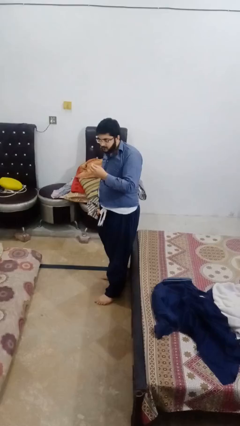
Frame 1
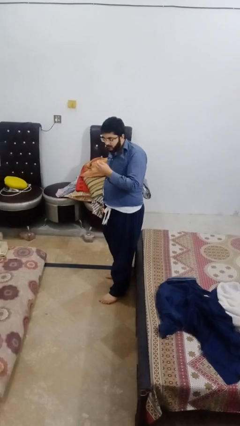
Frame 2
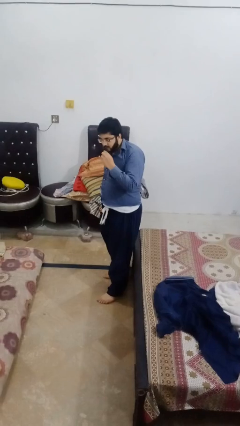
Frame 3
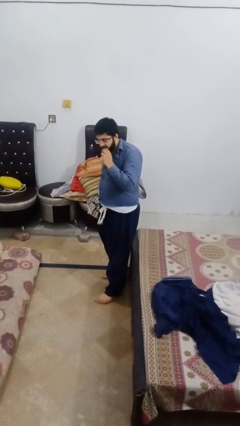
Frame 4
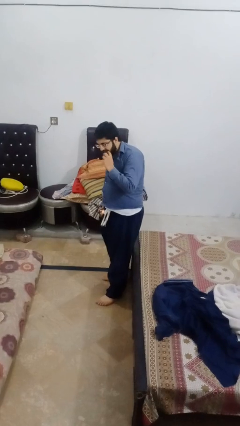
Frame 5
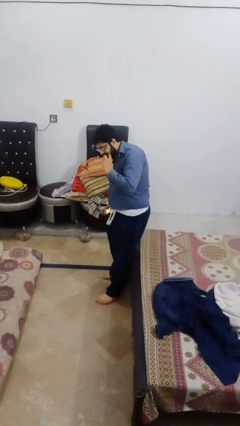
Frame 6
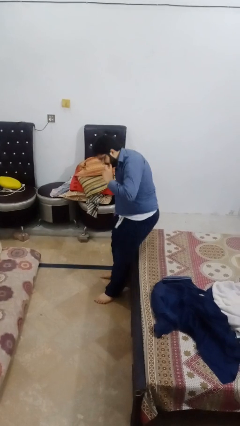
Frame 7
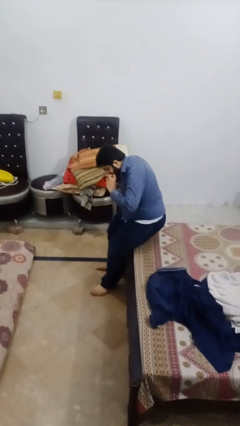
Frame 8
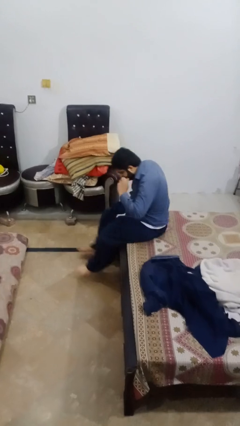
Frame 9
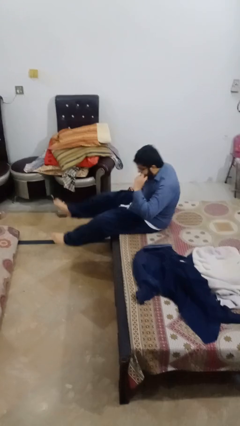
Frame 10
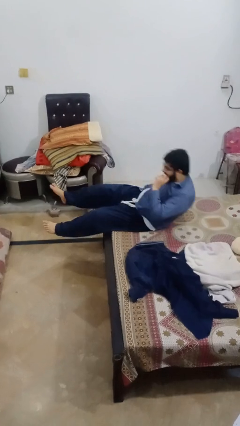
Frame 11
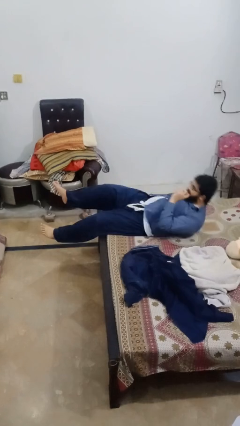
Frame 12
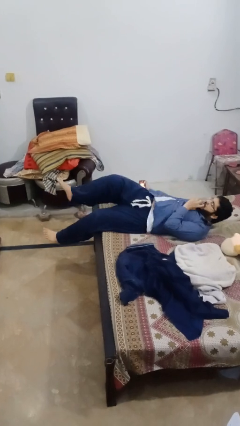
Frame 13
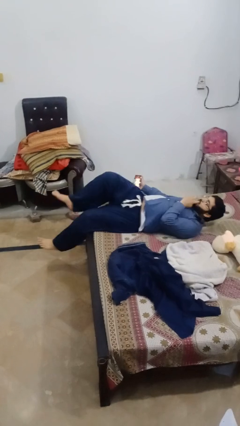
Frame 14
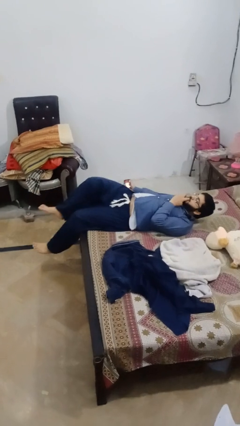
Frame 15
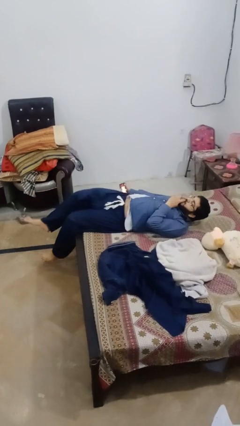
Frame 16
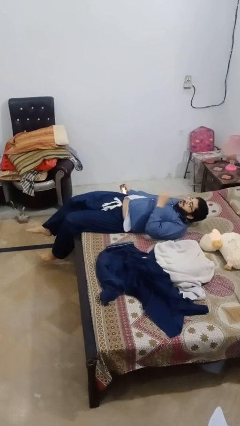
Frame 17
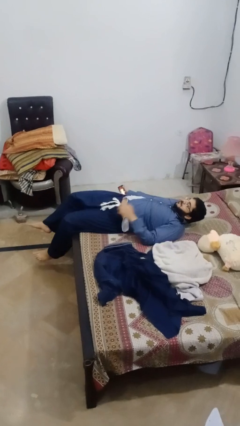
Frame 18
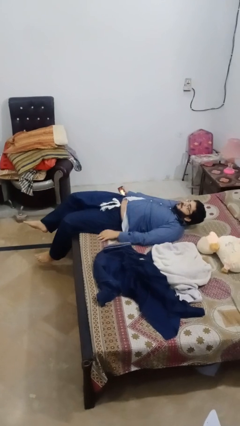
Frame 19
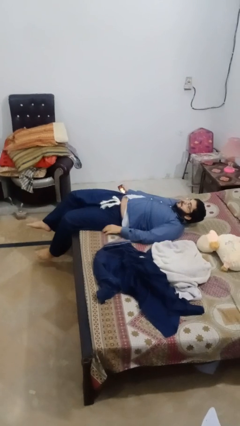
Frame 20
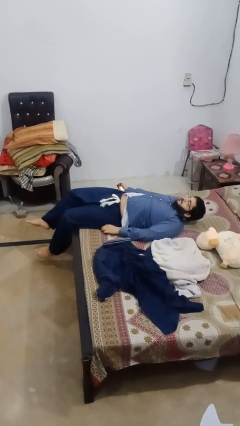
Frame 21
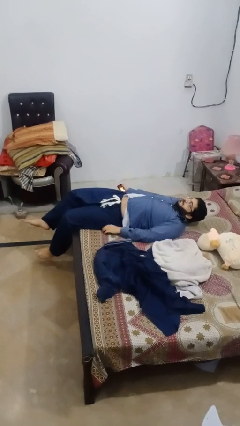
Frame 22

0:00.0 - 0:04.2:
person lies down on bed

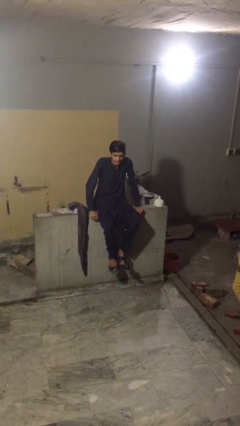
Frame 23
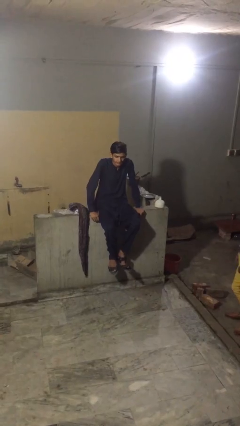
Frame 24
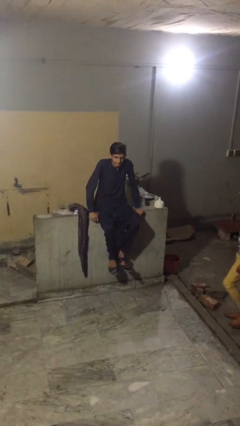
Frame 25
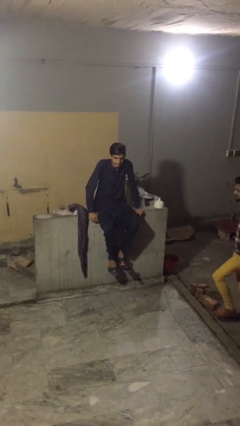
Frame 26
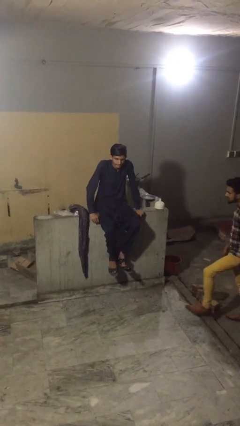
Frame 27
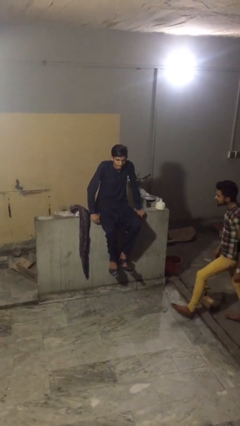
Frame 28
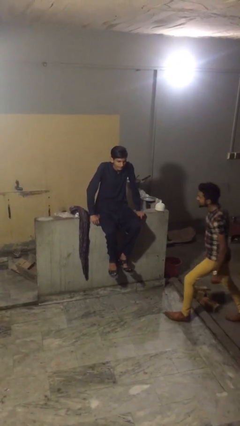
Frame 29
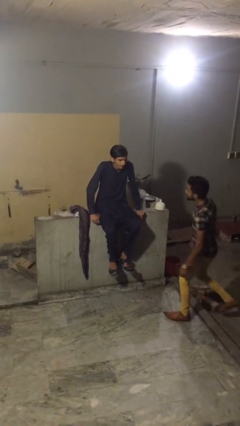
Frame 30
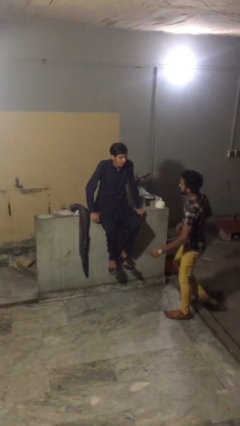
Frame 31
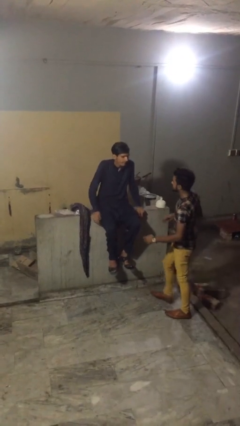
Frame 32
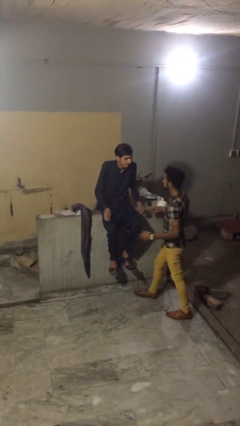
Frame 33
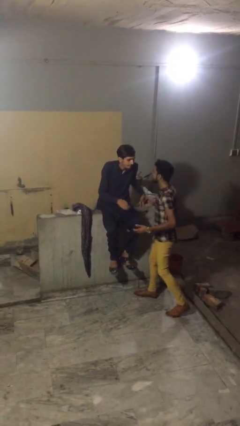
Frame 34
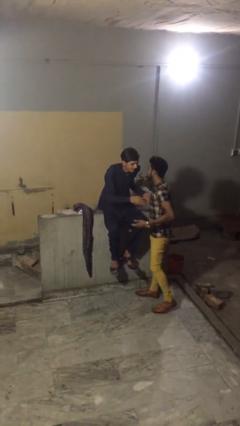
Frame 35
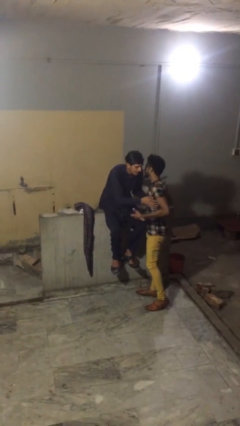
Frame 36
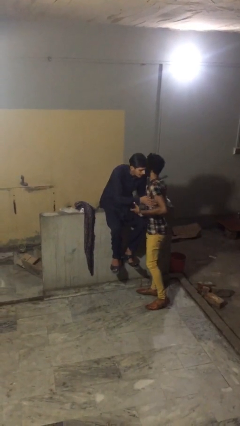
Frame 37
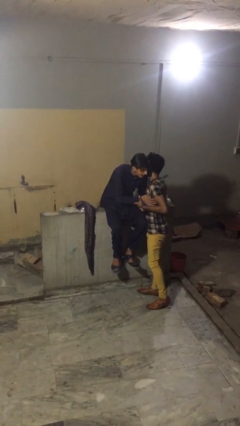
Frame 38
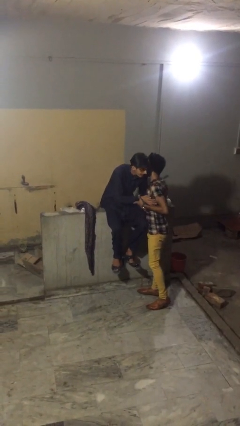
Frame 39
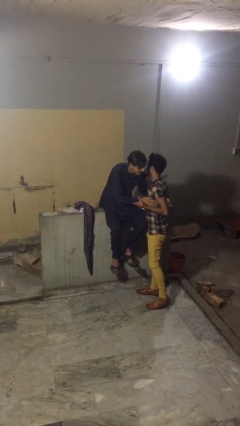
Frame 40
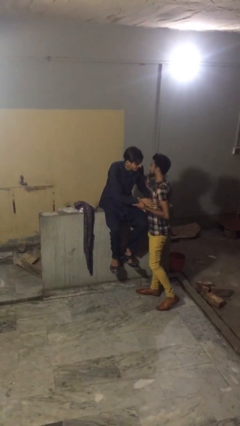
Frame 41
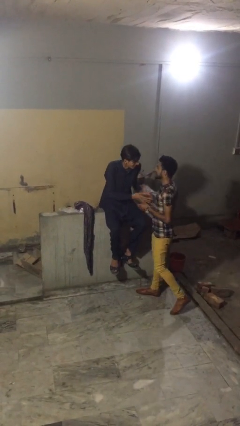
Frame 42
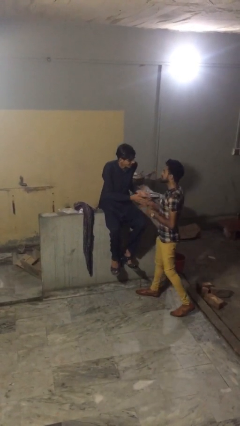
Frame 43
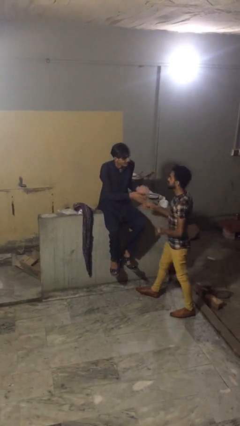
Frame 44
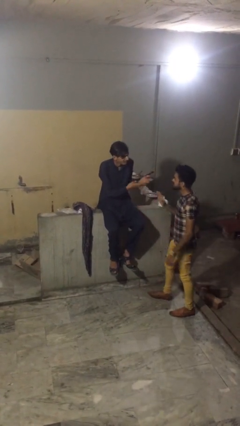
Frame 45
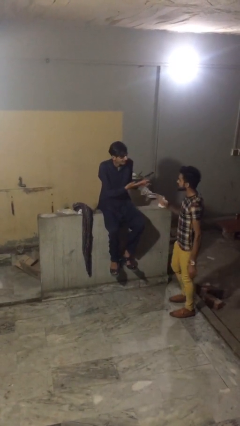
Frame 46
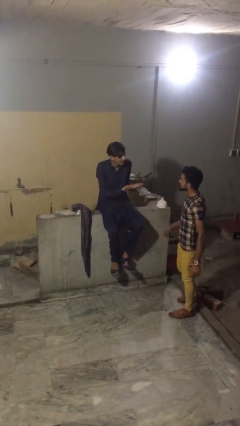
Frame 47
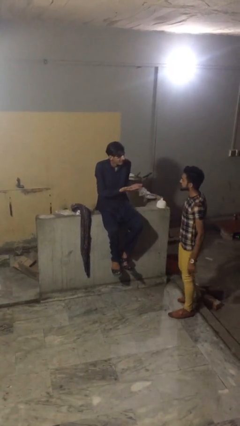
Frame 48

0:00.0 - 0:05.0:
person embraces person

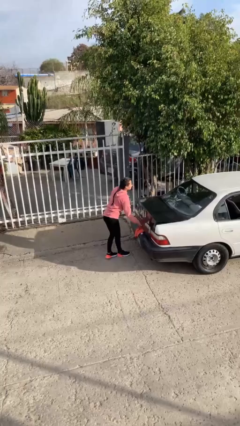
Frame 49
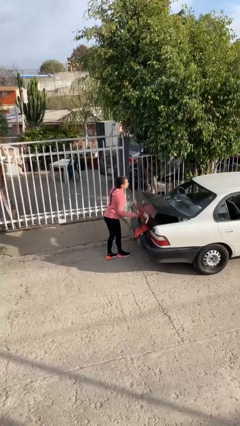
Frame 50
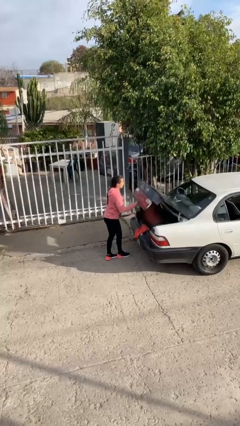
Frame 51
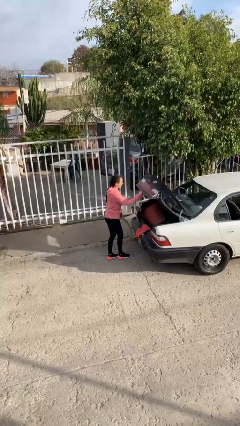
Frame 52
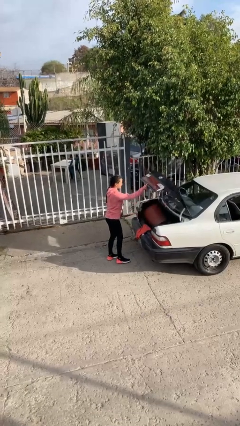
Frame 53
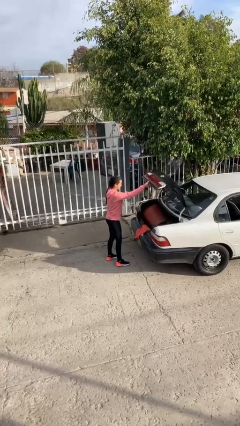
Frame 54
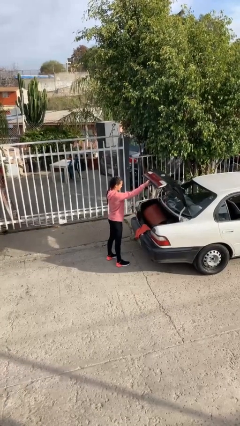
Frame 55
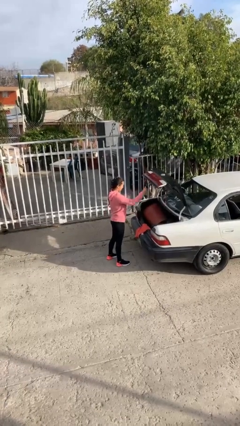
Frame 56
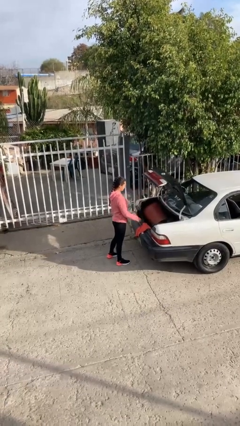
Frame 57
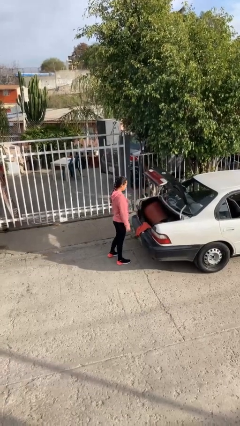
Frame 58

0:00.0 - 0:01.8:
person opens car trunk

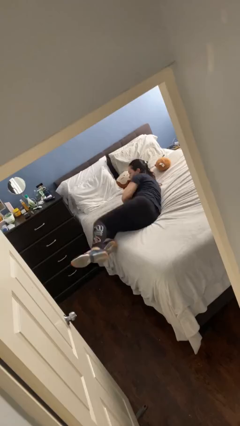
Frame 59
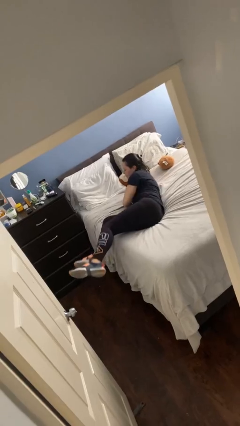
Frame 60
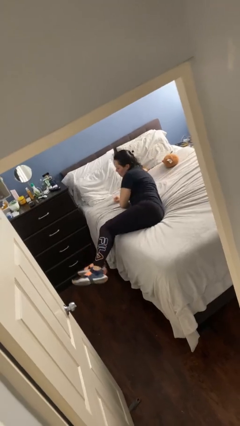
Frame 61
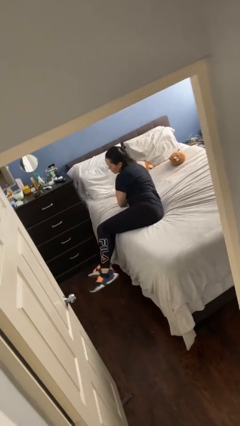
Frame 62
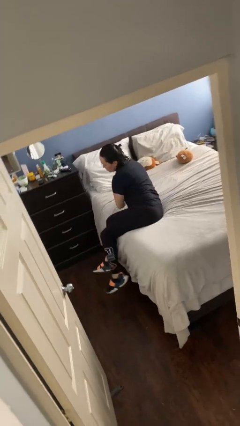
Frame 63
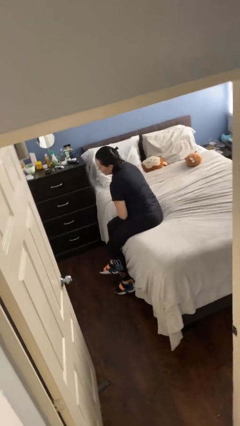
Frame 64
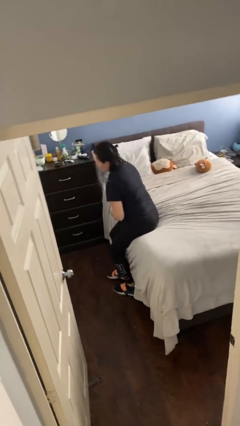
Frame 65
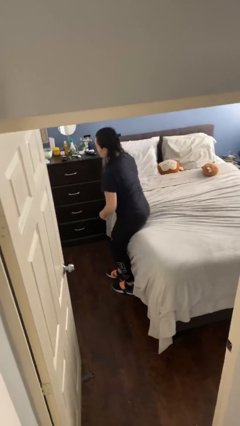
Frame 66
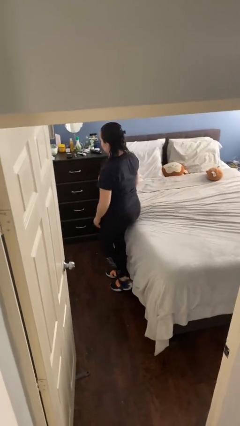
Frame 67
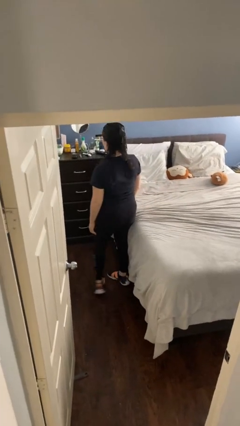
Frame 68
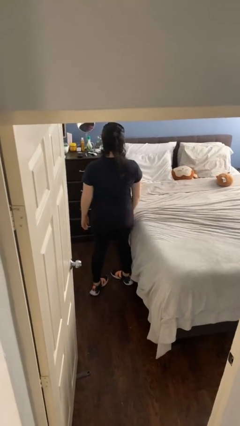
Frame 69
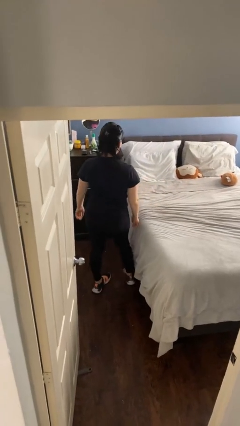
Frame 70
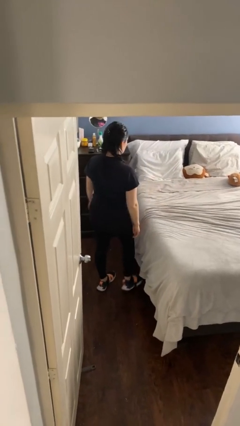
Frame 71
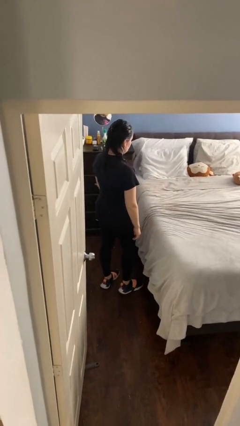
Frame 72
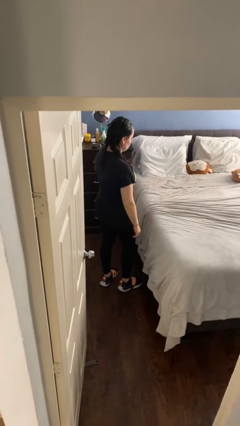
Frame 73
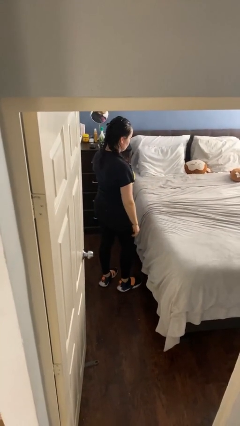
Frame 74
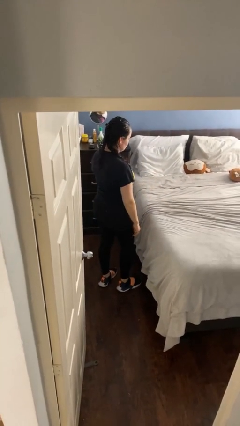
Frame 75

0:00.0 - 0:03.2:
person stands up

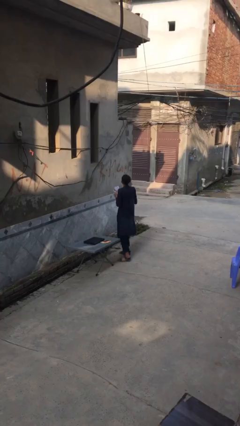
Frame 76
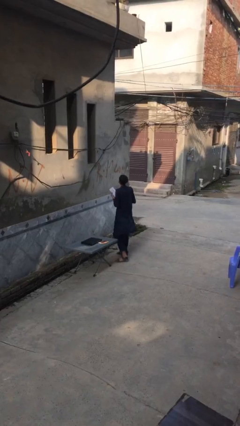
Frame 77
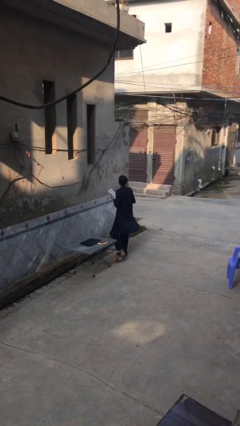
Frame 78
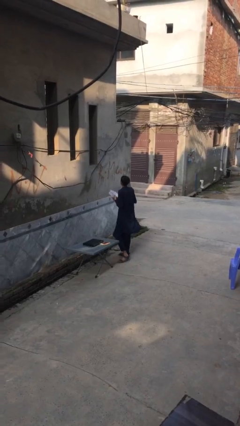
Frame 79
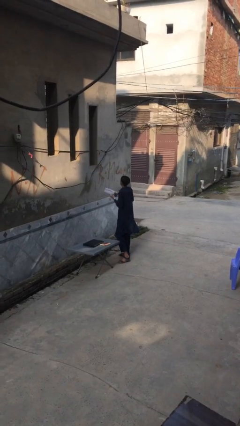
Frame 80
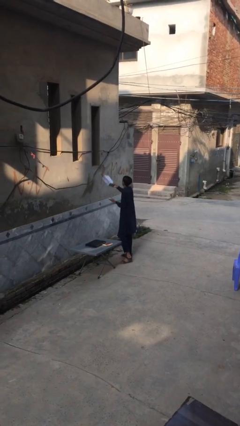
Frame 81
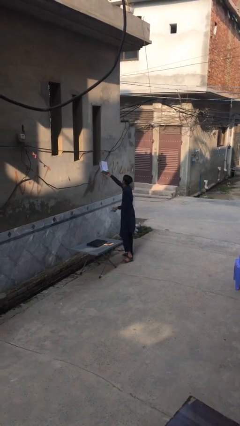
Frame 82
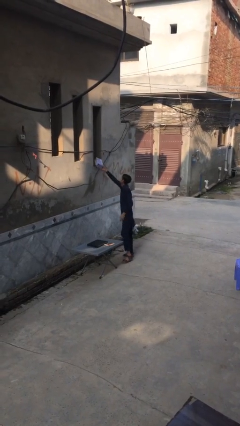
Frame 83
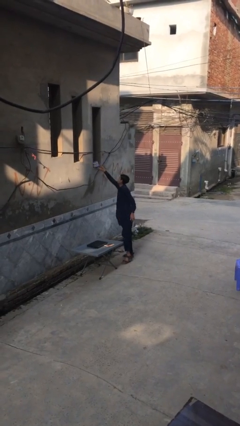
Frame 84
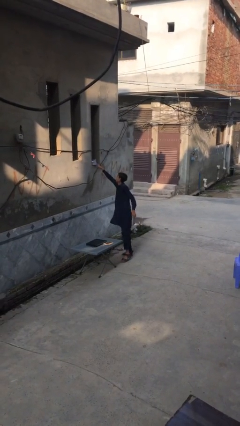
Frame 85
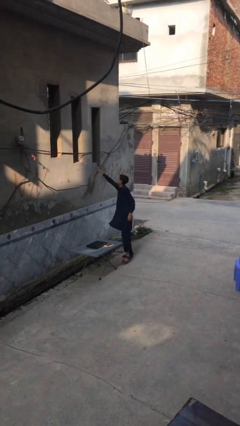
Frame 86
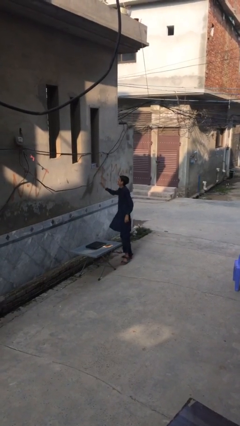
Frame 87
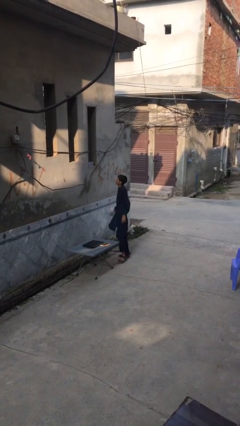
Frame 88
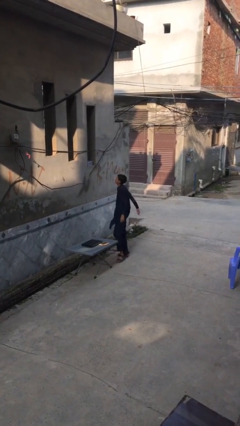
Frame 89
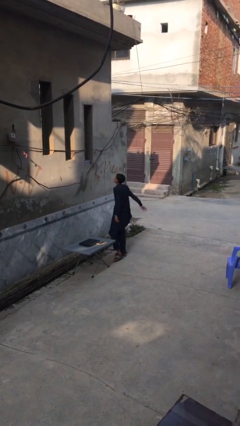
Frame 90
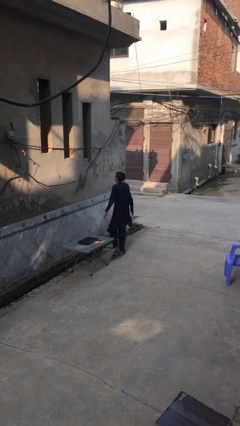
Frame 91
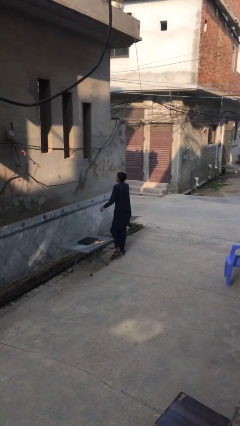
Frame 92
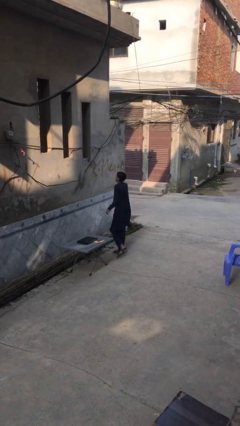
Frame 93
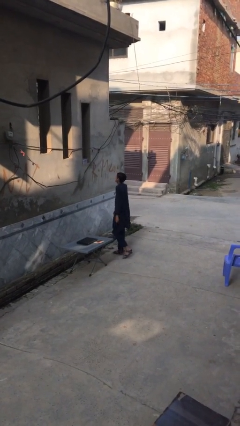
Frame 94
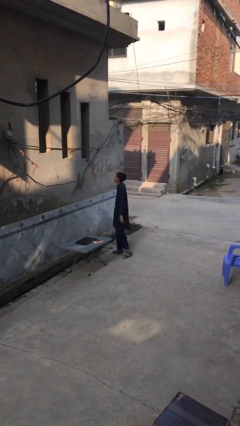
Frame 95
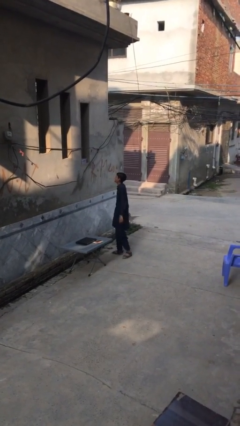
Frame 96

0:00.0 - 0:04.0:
person puts down object on shelf
